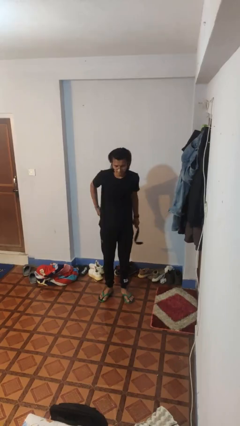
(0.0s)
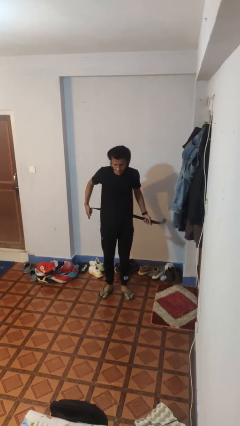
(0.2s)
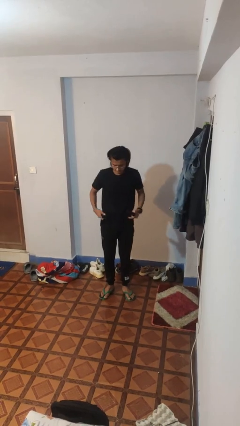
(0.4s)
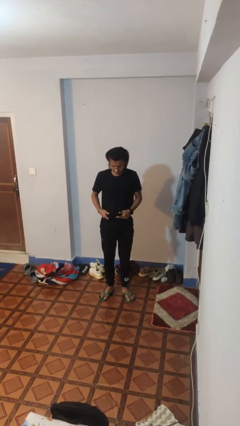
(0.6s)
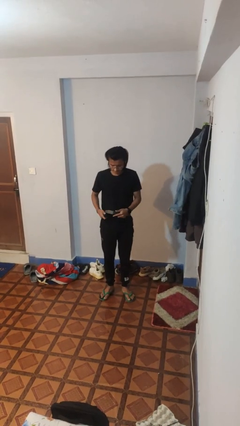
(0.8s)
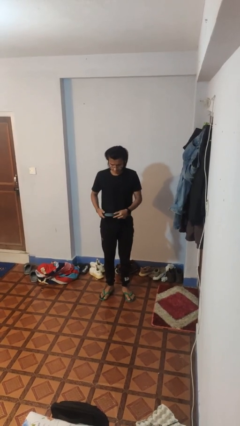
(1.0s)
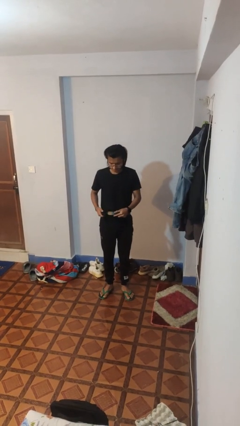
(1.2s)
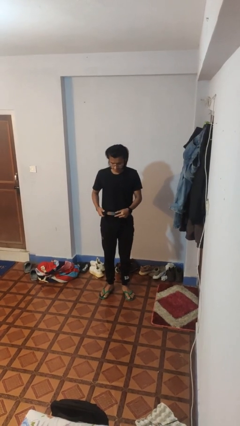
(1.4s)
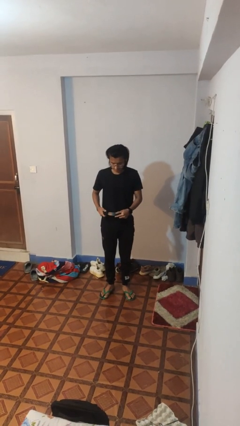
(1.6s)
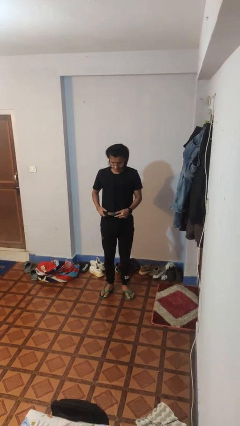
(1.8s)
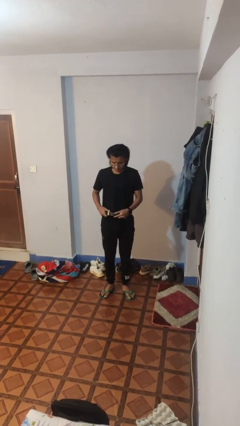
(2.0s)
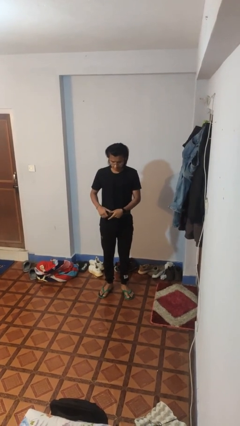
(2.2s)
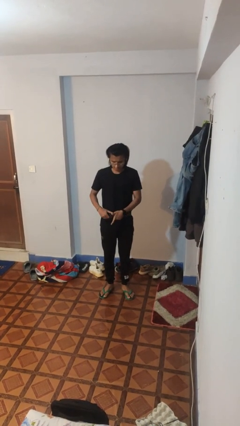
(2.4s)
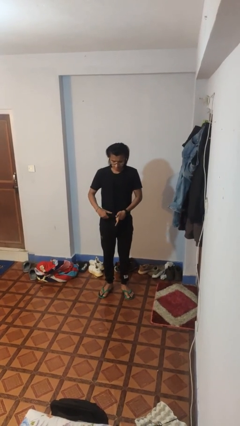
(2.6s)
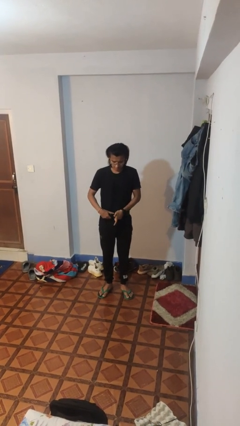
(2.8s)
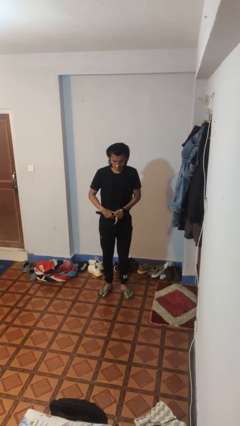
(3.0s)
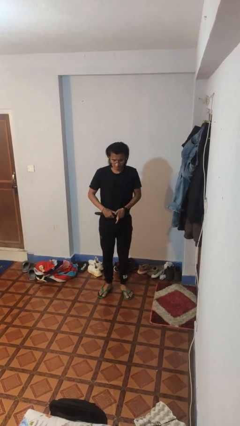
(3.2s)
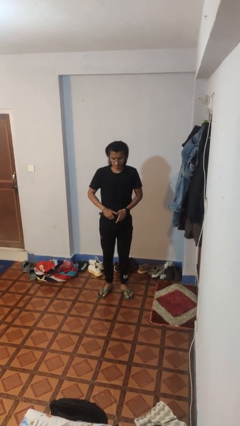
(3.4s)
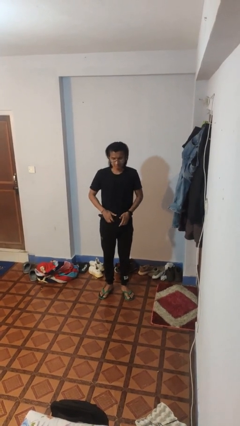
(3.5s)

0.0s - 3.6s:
person puts on belt

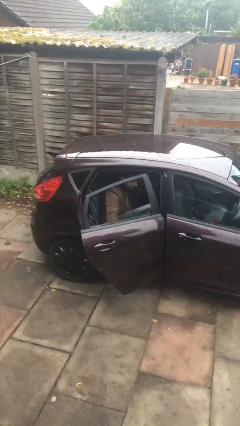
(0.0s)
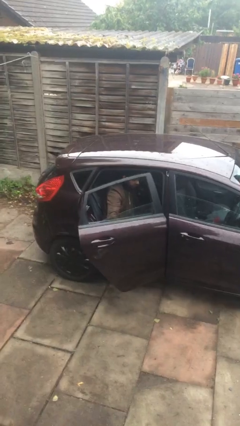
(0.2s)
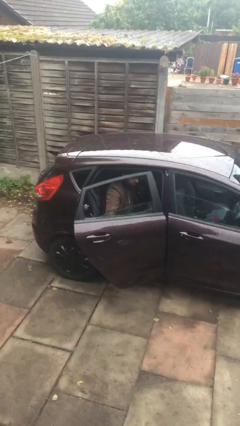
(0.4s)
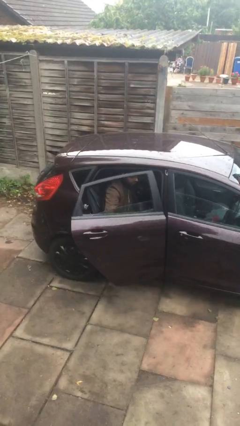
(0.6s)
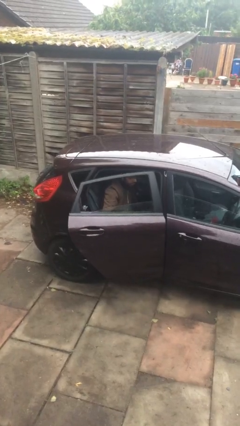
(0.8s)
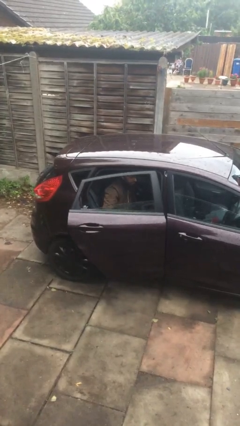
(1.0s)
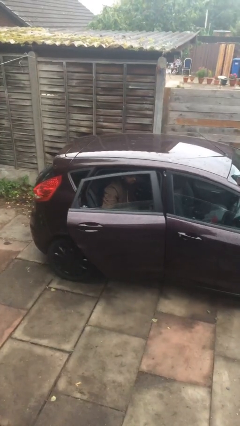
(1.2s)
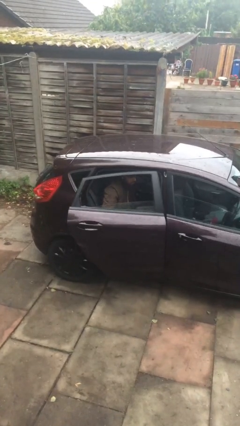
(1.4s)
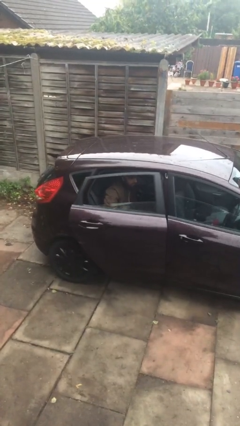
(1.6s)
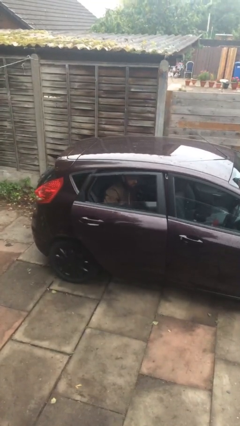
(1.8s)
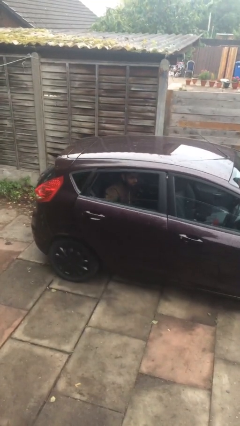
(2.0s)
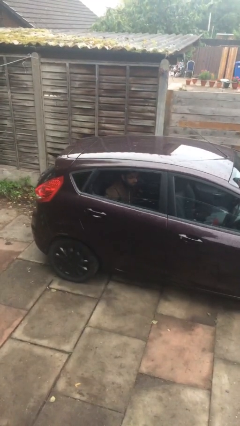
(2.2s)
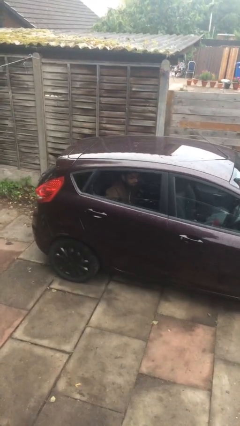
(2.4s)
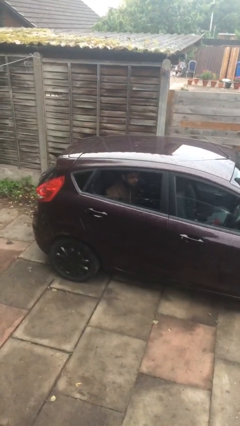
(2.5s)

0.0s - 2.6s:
person closes car door

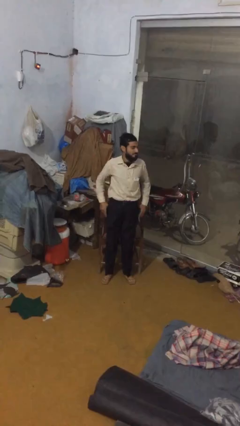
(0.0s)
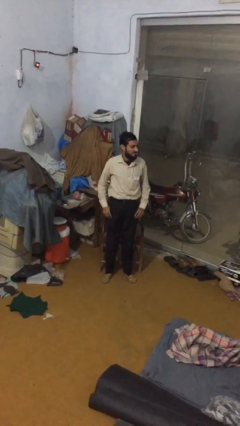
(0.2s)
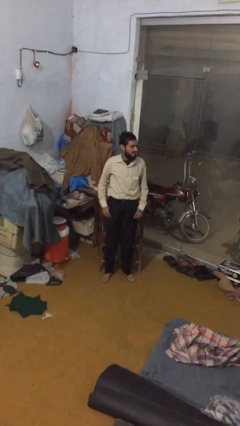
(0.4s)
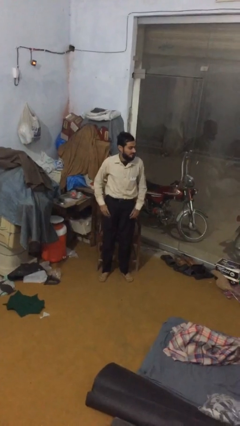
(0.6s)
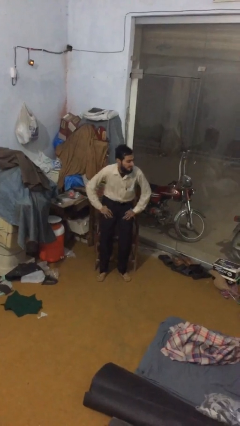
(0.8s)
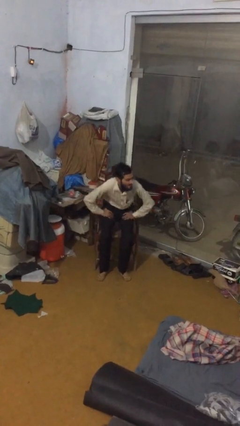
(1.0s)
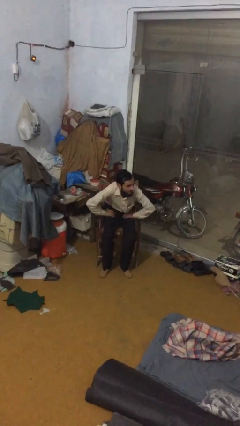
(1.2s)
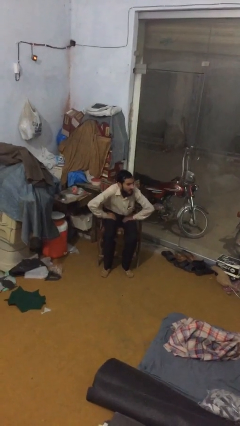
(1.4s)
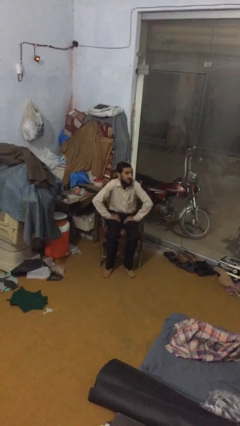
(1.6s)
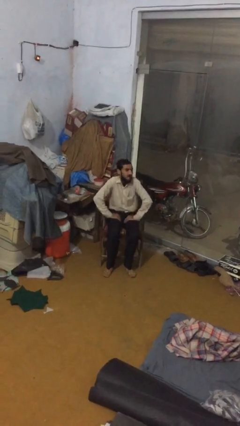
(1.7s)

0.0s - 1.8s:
person sits down

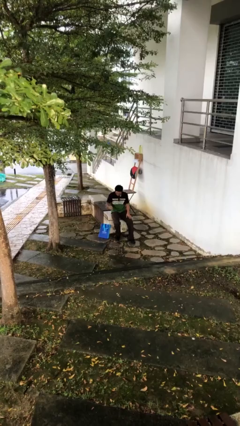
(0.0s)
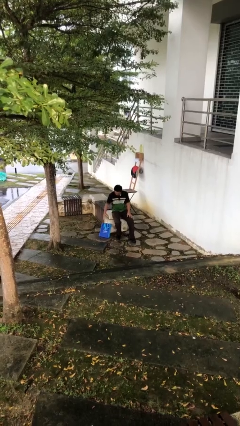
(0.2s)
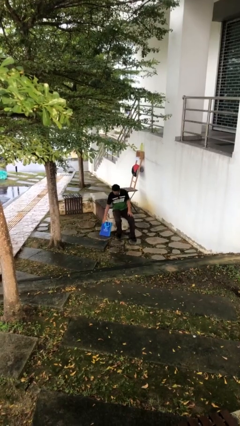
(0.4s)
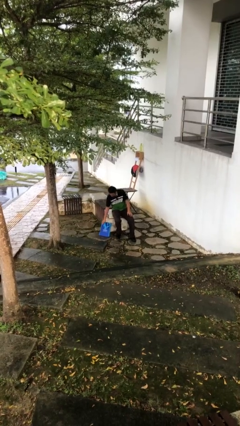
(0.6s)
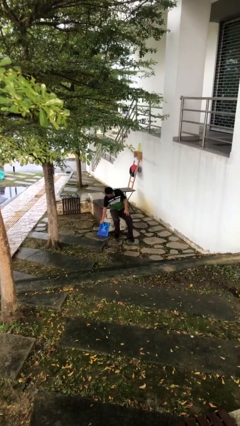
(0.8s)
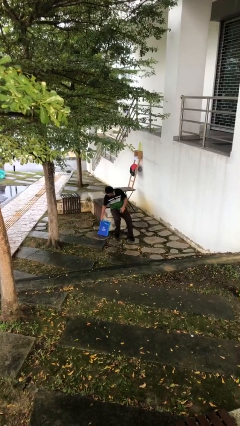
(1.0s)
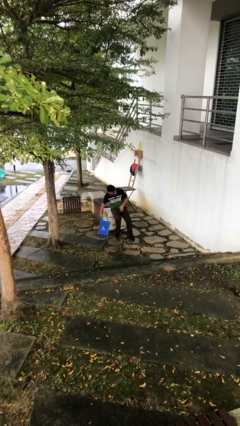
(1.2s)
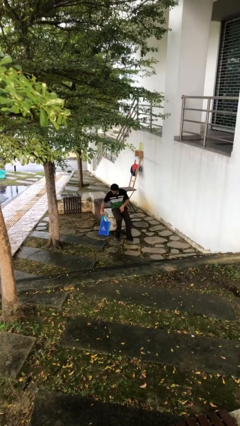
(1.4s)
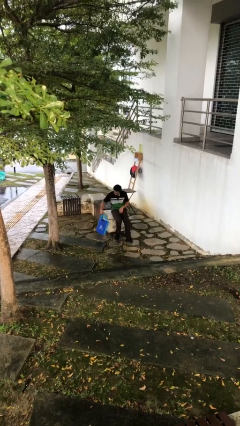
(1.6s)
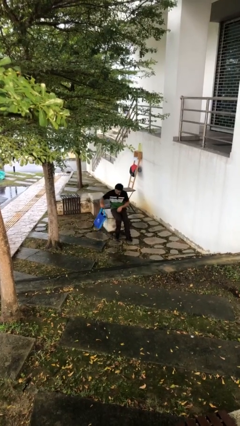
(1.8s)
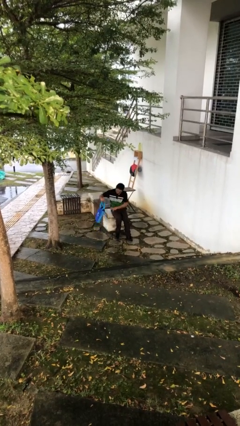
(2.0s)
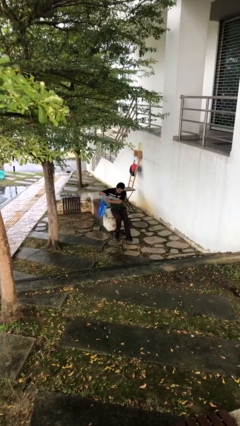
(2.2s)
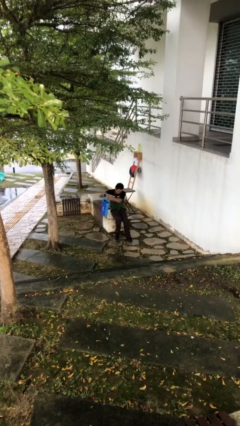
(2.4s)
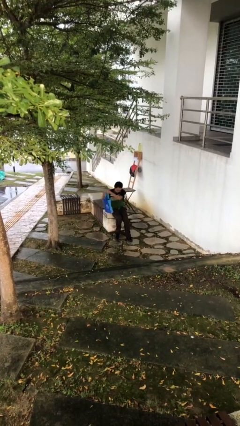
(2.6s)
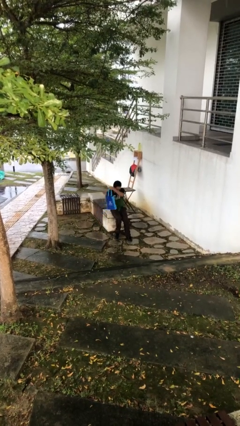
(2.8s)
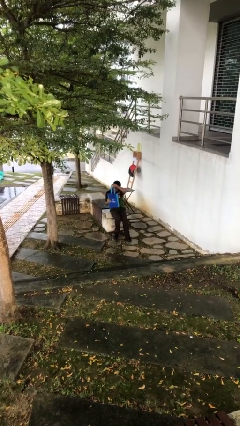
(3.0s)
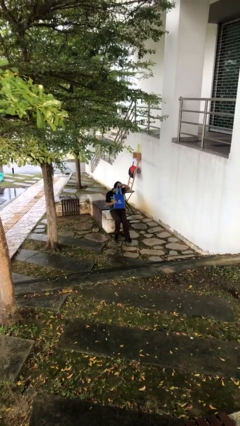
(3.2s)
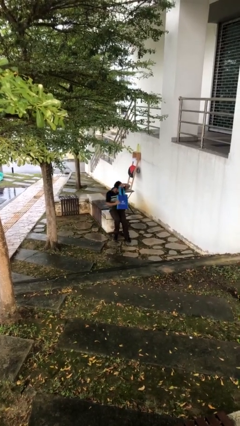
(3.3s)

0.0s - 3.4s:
person picks up object from floor

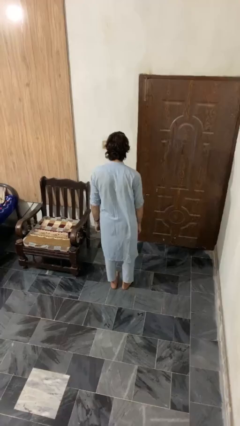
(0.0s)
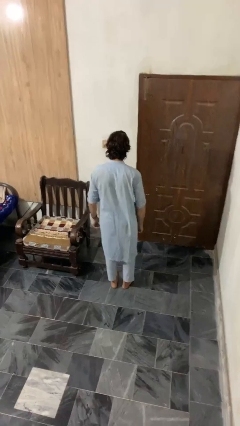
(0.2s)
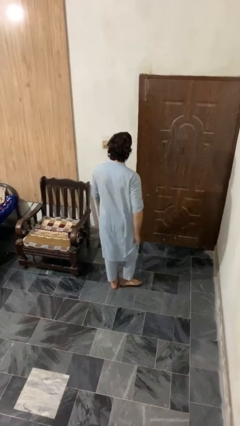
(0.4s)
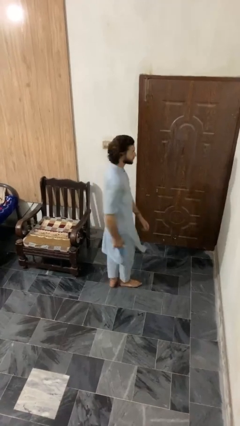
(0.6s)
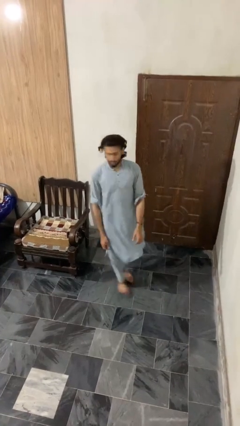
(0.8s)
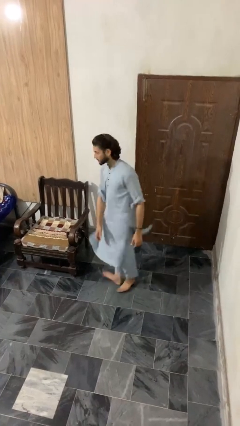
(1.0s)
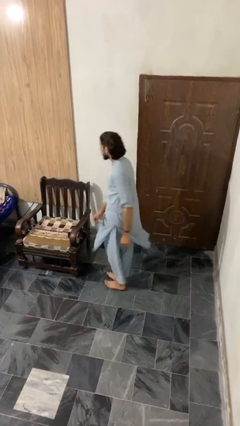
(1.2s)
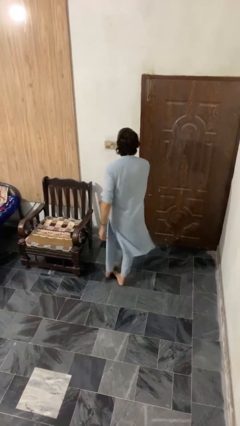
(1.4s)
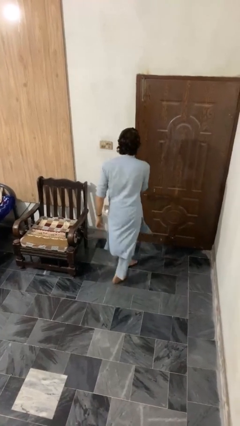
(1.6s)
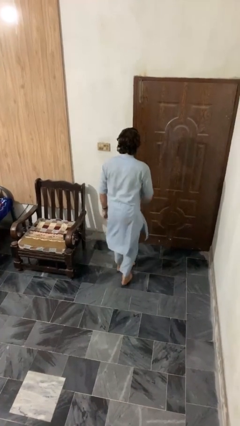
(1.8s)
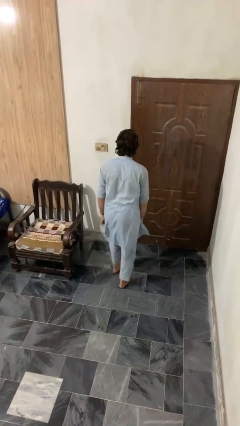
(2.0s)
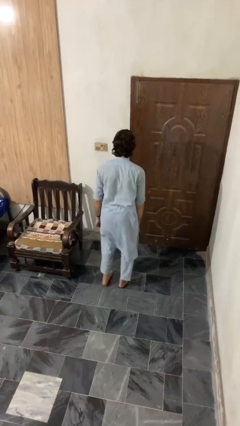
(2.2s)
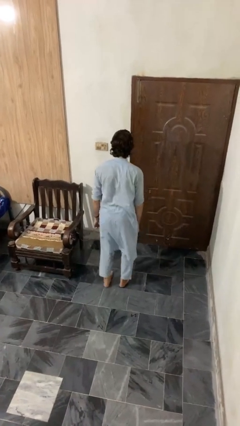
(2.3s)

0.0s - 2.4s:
person twirls

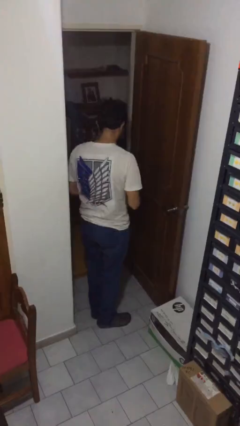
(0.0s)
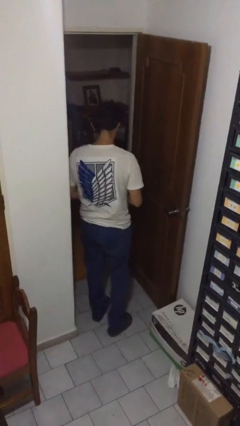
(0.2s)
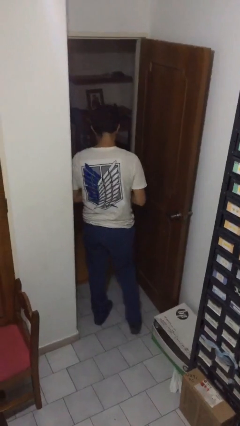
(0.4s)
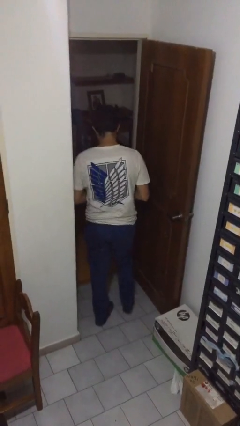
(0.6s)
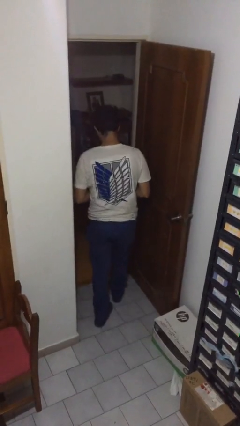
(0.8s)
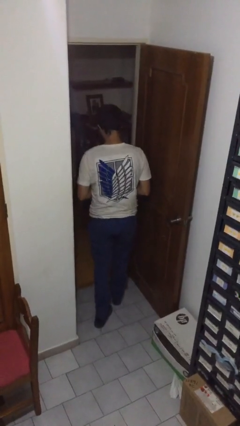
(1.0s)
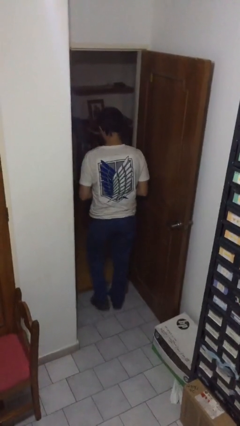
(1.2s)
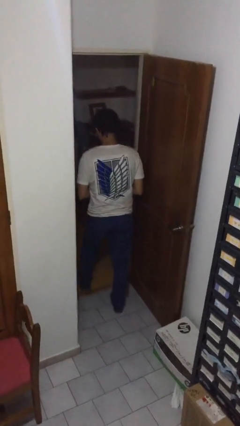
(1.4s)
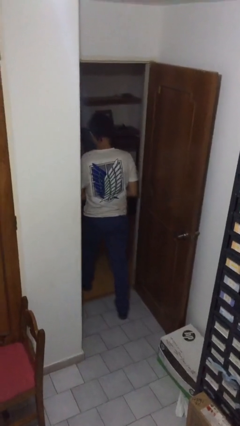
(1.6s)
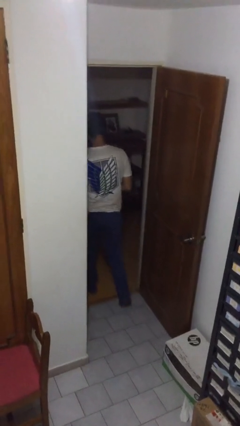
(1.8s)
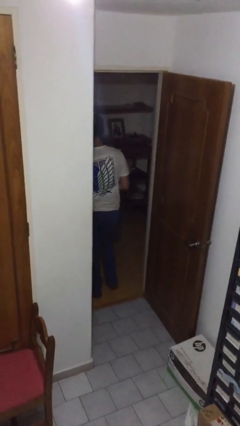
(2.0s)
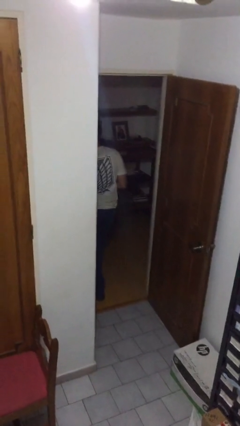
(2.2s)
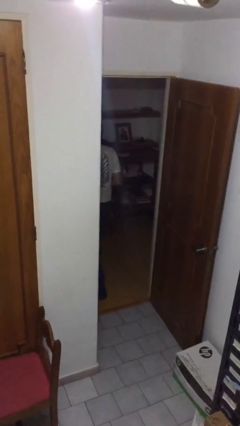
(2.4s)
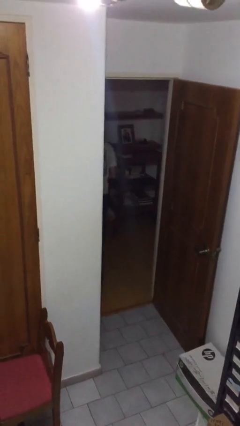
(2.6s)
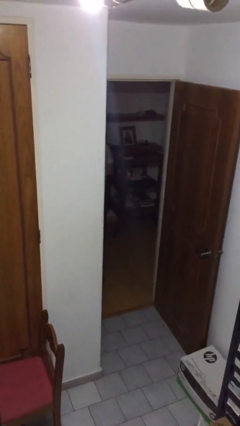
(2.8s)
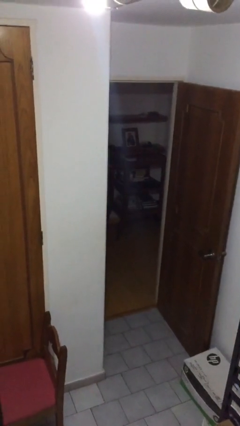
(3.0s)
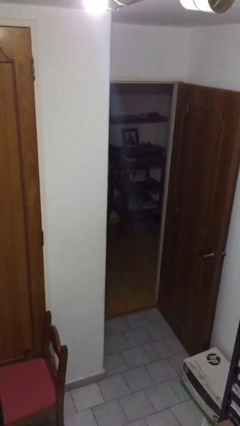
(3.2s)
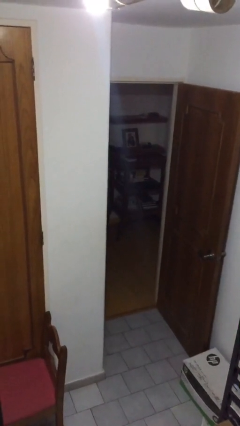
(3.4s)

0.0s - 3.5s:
person exits scene through structure

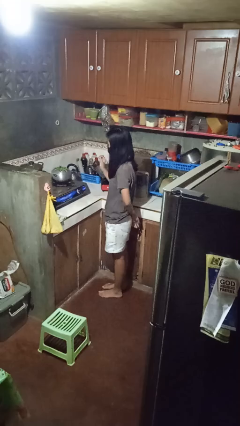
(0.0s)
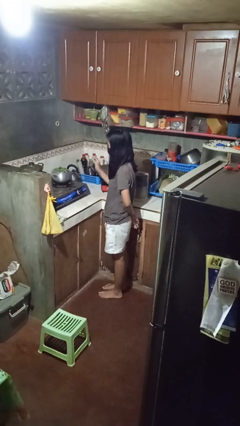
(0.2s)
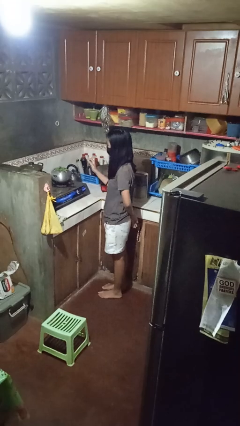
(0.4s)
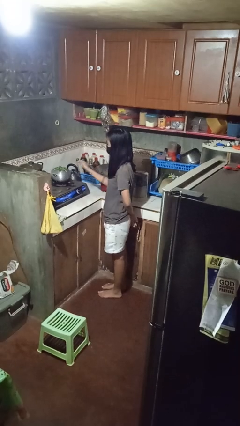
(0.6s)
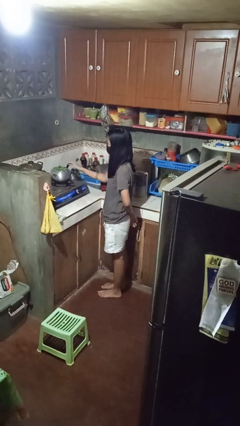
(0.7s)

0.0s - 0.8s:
person burns hand
